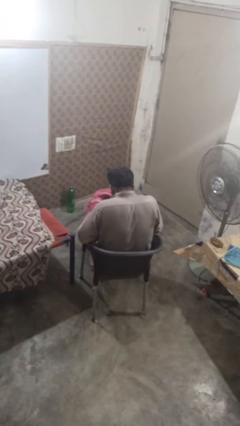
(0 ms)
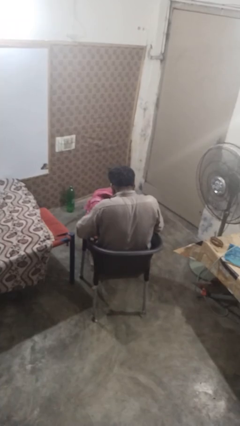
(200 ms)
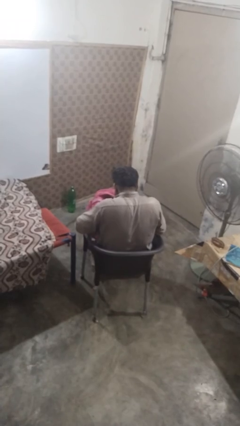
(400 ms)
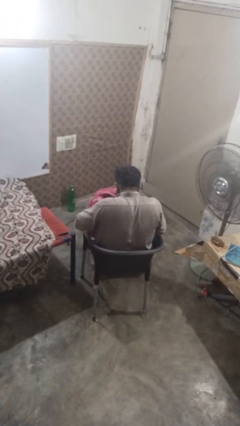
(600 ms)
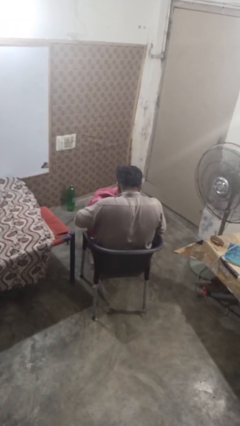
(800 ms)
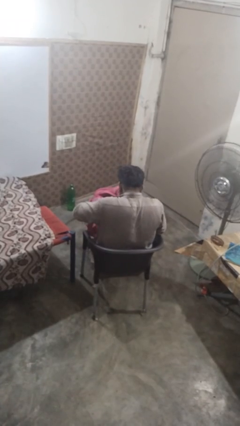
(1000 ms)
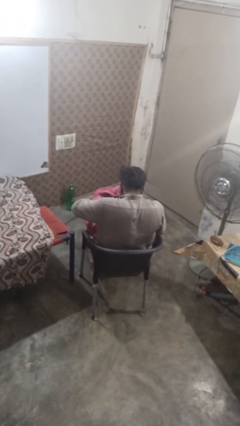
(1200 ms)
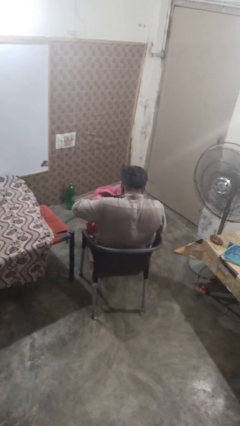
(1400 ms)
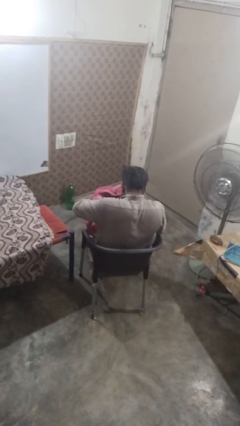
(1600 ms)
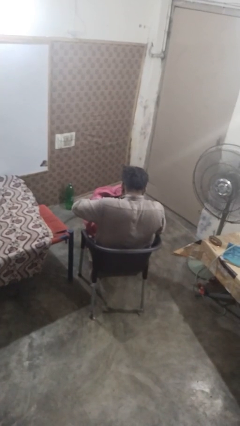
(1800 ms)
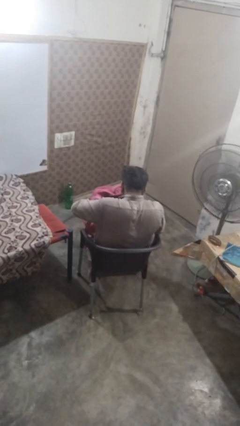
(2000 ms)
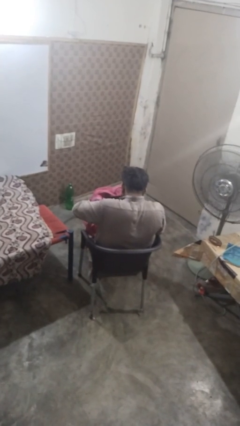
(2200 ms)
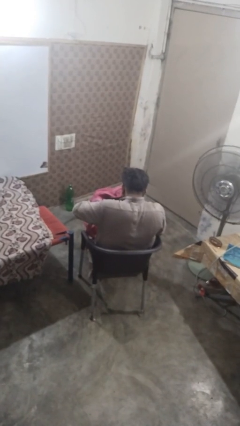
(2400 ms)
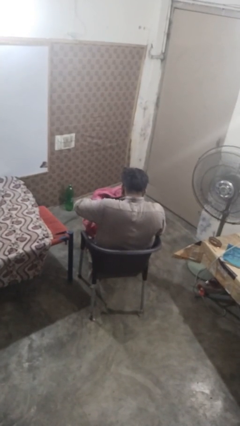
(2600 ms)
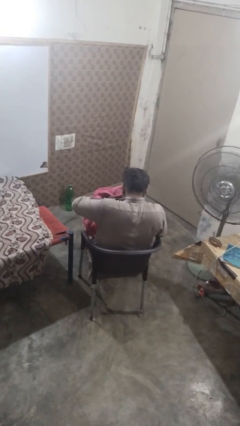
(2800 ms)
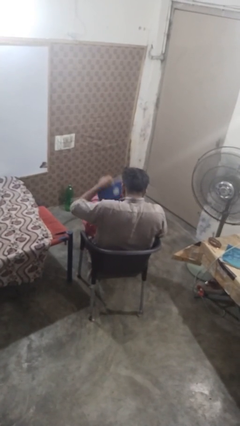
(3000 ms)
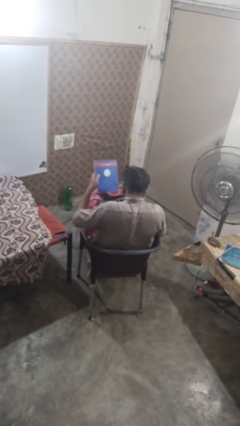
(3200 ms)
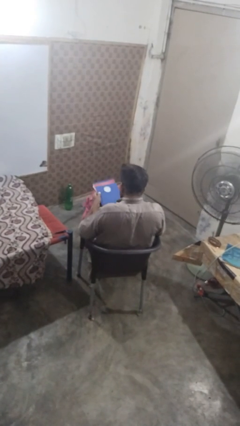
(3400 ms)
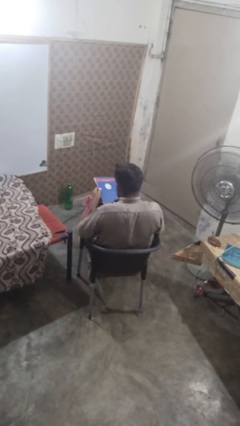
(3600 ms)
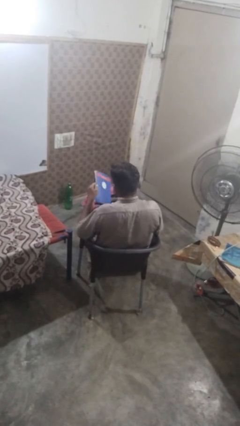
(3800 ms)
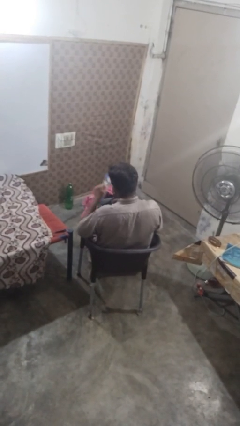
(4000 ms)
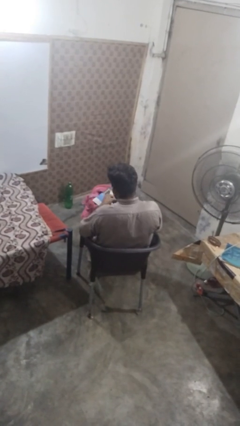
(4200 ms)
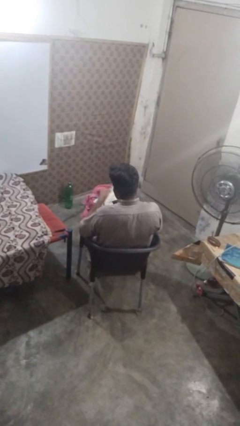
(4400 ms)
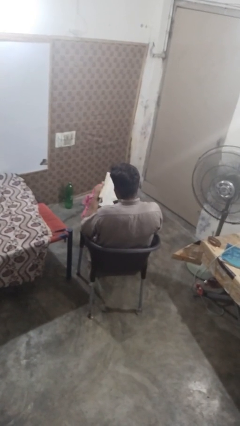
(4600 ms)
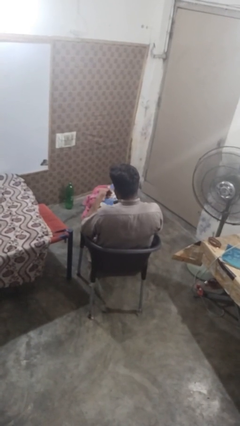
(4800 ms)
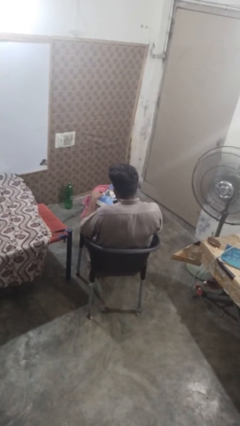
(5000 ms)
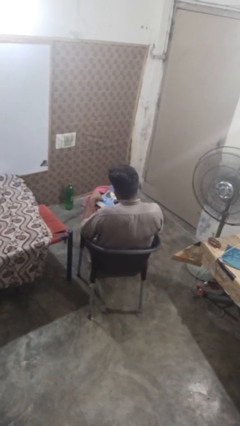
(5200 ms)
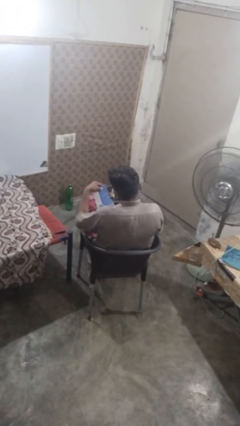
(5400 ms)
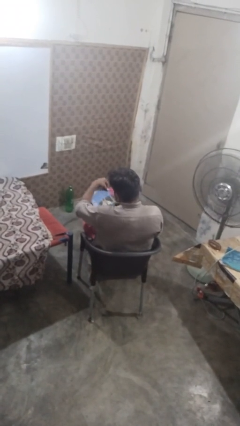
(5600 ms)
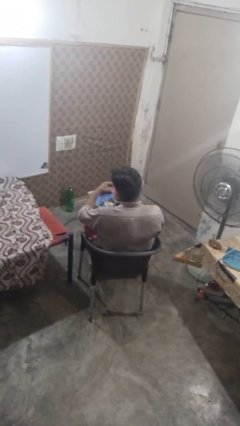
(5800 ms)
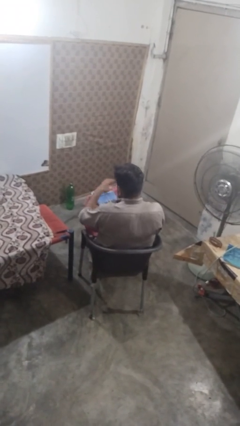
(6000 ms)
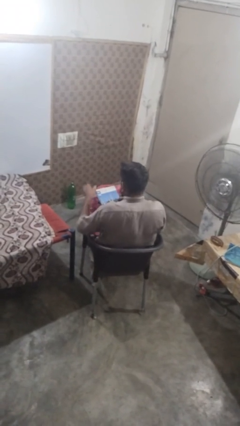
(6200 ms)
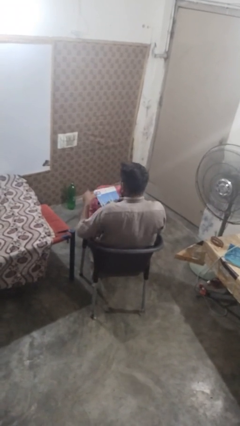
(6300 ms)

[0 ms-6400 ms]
person takes object from backpack

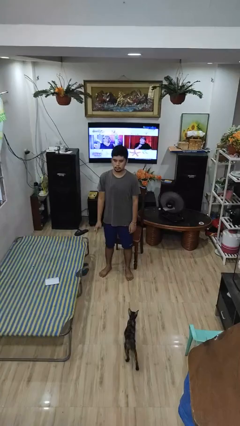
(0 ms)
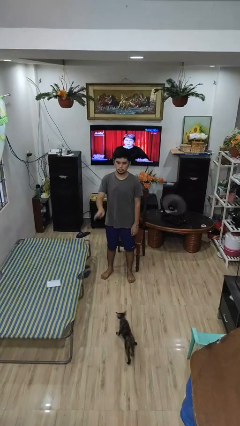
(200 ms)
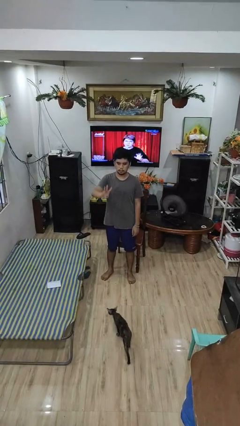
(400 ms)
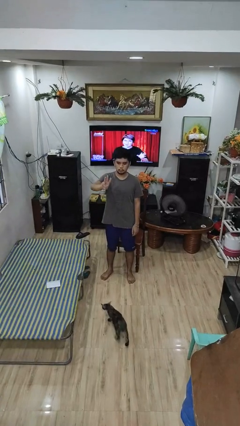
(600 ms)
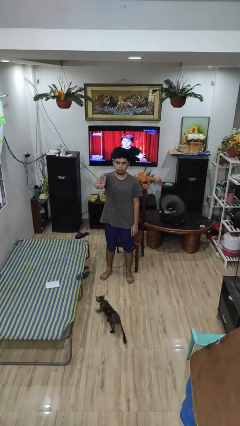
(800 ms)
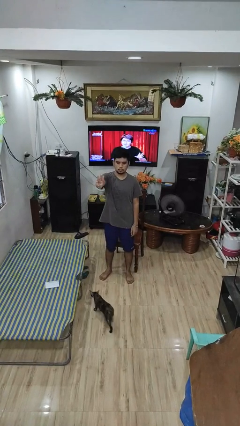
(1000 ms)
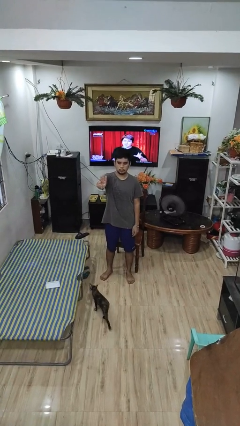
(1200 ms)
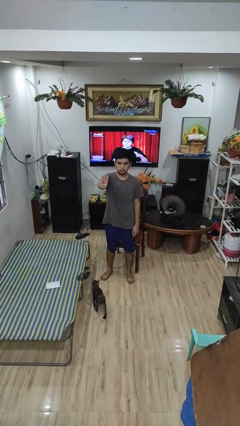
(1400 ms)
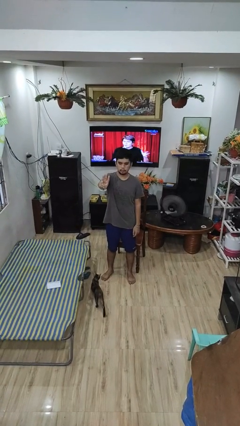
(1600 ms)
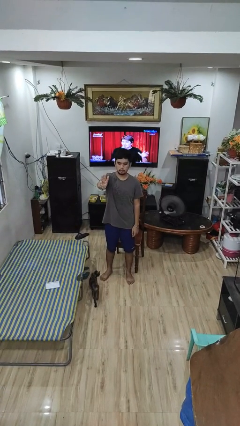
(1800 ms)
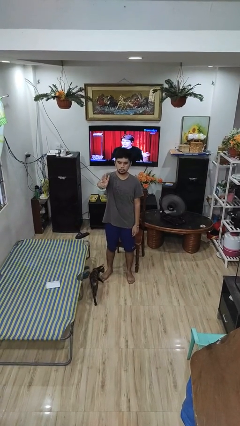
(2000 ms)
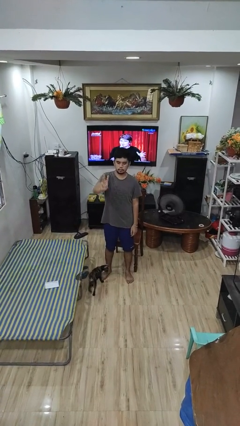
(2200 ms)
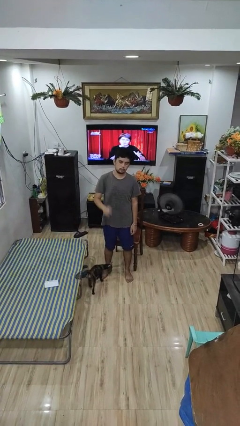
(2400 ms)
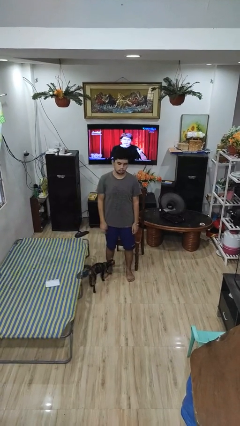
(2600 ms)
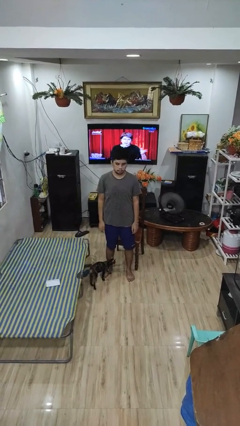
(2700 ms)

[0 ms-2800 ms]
person gestures number three

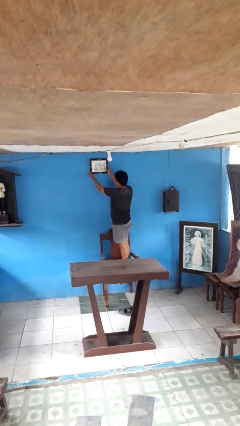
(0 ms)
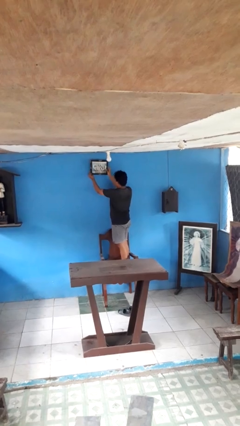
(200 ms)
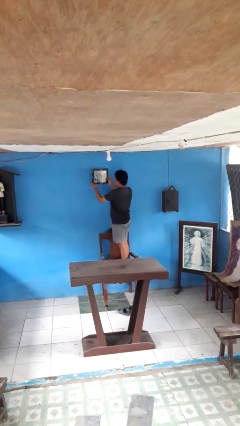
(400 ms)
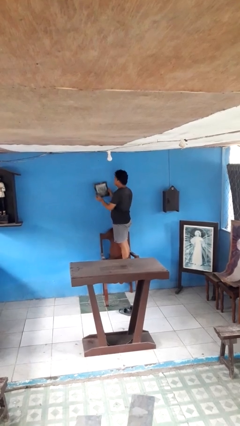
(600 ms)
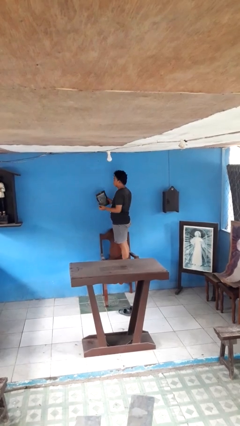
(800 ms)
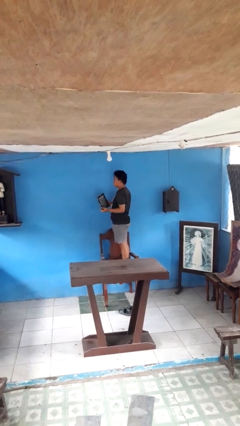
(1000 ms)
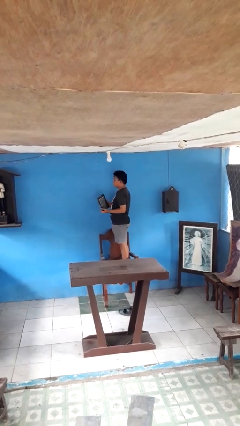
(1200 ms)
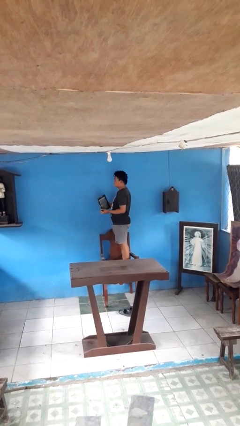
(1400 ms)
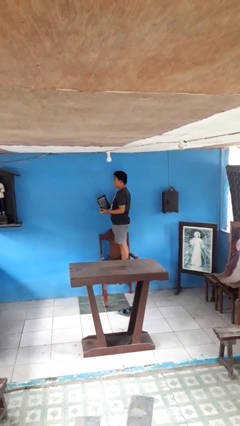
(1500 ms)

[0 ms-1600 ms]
person takes down picture frame

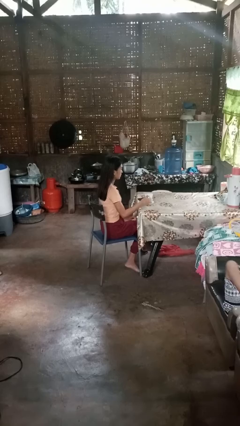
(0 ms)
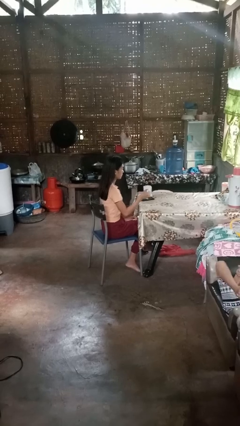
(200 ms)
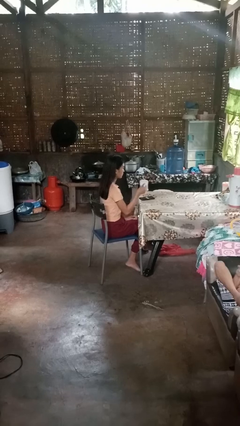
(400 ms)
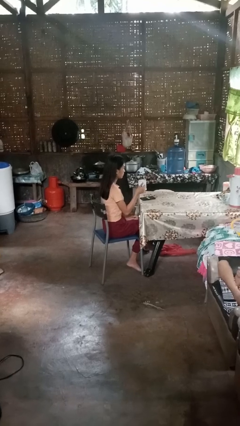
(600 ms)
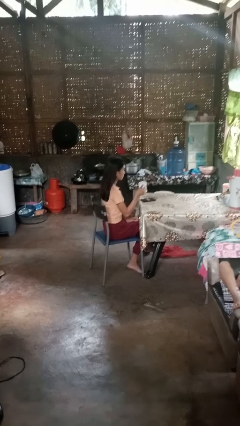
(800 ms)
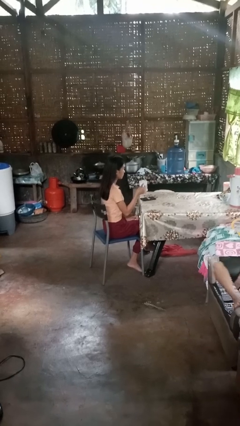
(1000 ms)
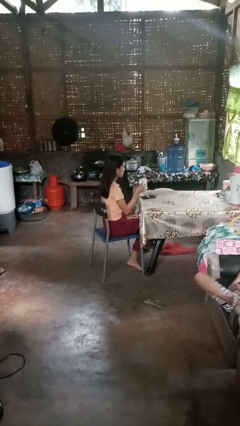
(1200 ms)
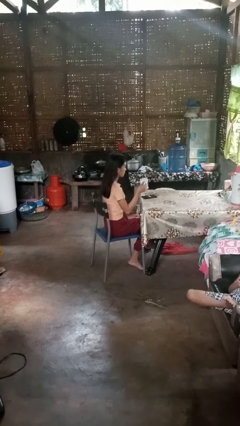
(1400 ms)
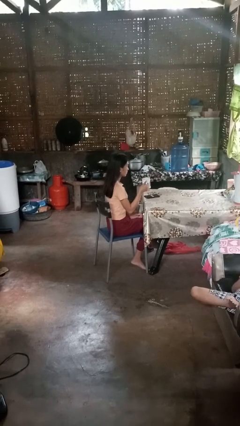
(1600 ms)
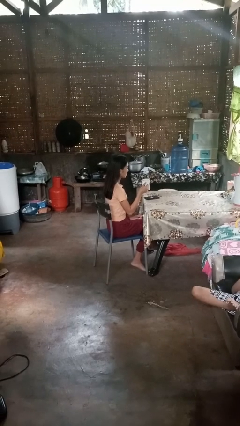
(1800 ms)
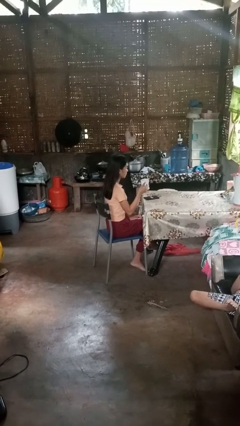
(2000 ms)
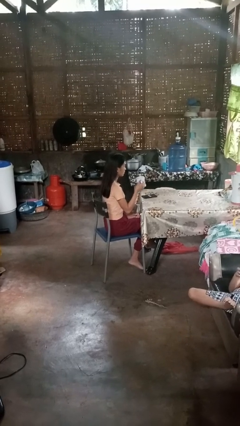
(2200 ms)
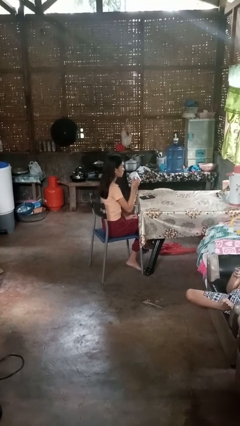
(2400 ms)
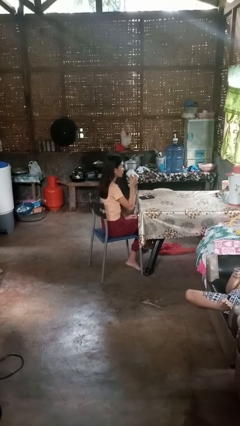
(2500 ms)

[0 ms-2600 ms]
person picks up object from table

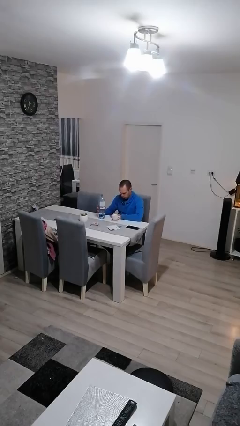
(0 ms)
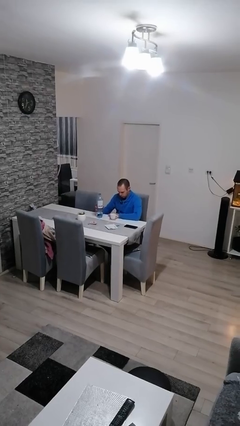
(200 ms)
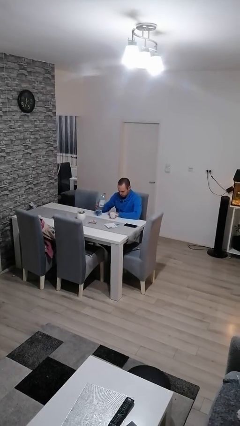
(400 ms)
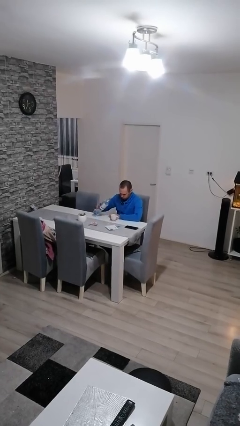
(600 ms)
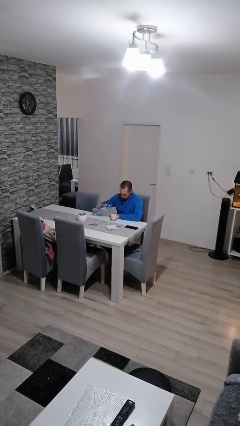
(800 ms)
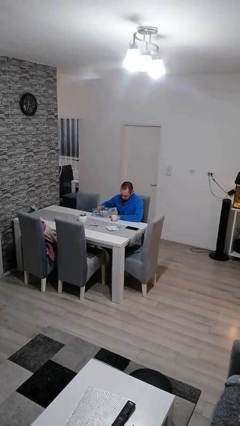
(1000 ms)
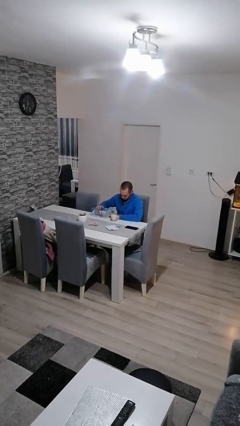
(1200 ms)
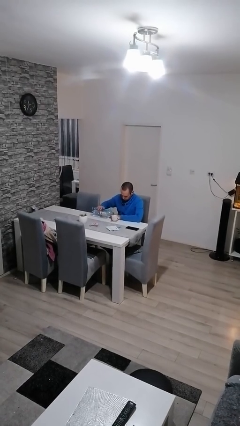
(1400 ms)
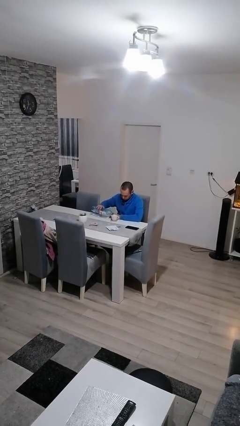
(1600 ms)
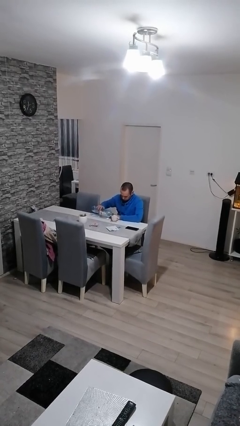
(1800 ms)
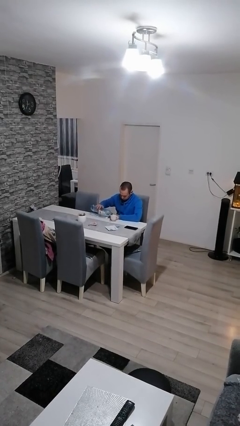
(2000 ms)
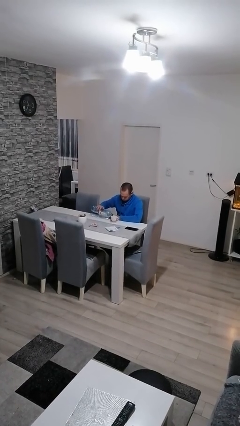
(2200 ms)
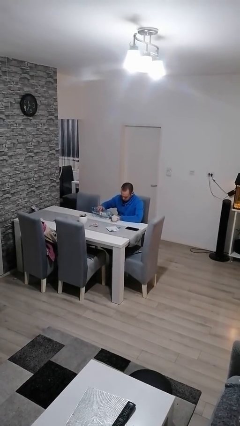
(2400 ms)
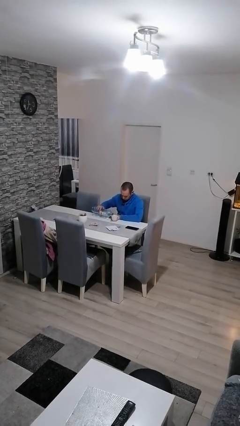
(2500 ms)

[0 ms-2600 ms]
person pours liquid into cup

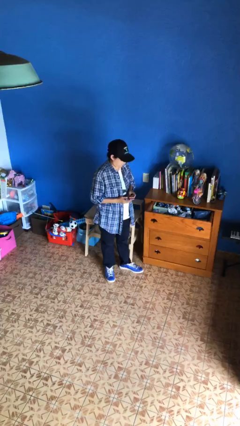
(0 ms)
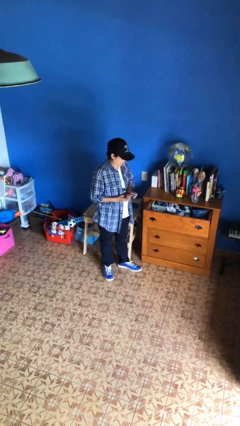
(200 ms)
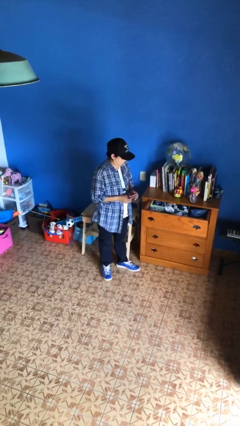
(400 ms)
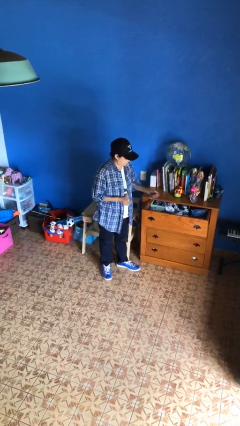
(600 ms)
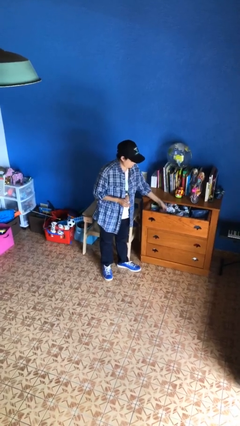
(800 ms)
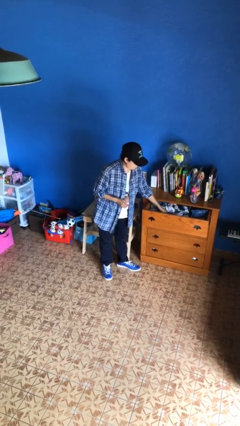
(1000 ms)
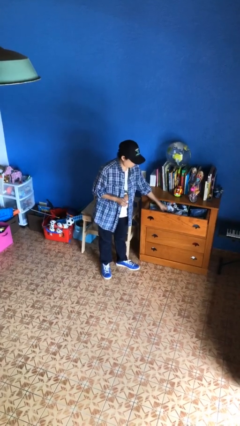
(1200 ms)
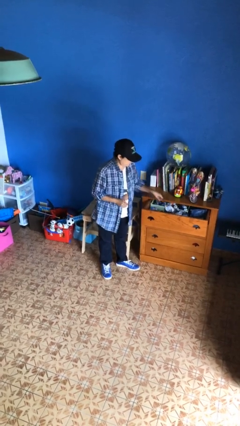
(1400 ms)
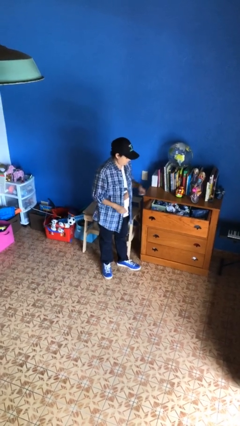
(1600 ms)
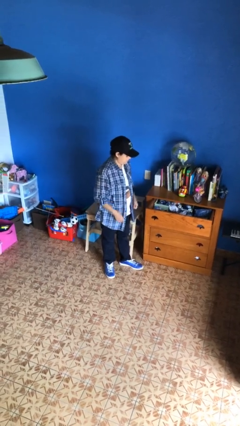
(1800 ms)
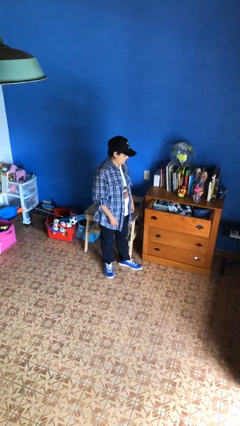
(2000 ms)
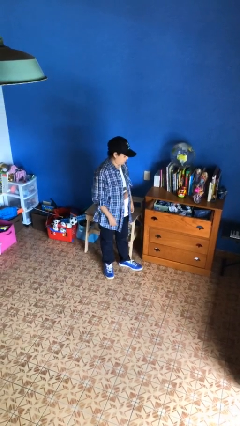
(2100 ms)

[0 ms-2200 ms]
person puts clothes into dresser
